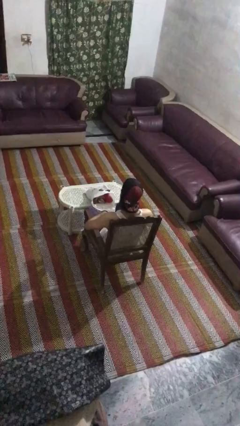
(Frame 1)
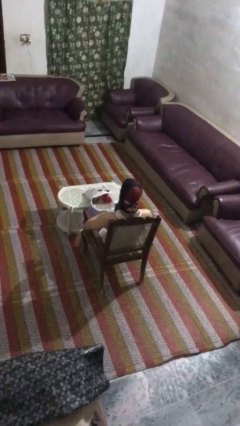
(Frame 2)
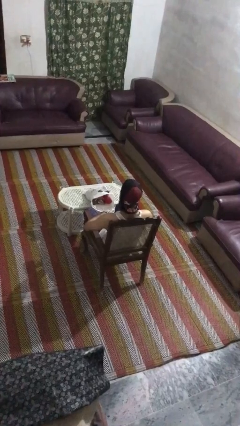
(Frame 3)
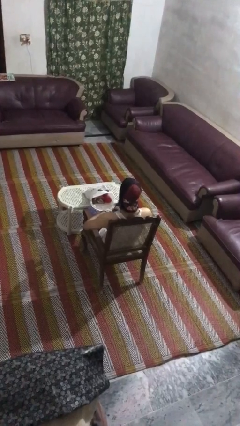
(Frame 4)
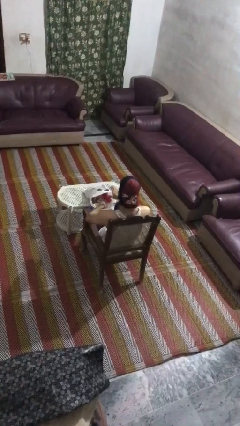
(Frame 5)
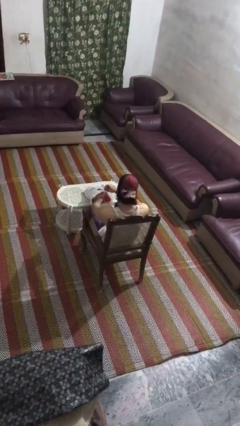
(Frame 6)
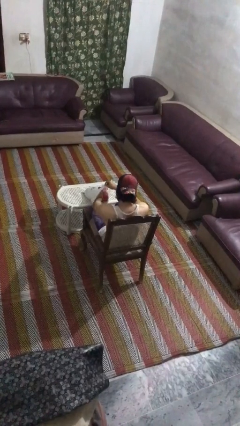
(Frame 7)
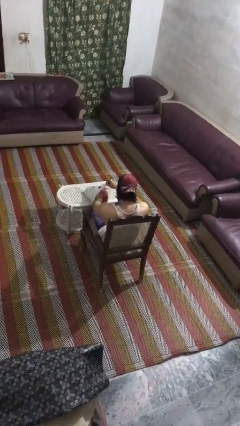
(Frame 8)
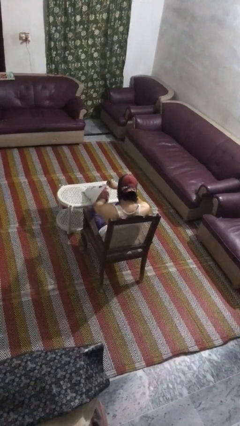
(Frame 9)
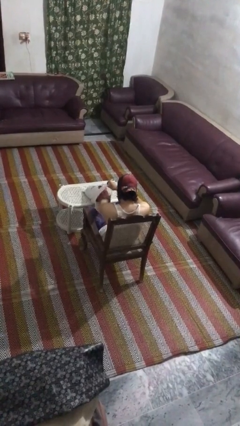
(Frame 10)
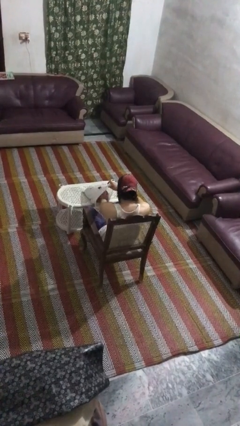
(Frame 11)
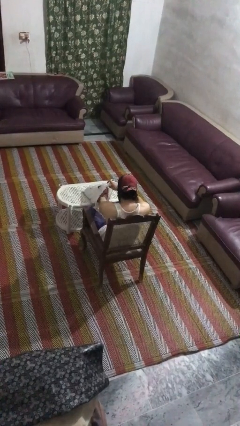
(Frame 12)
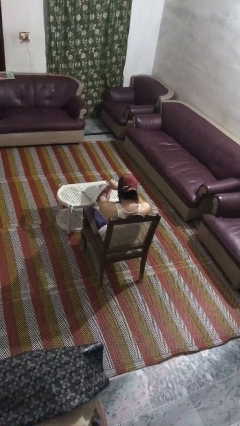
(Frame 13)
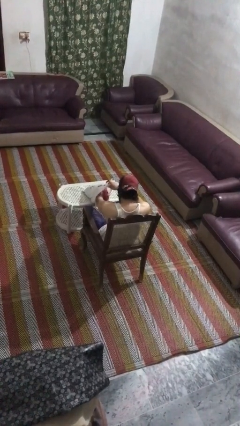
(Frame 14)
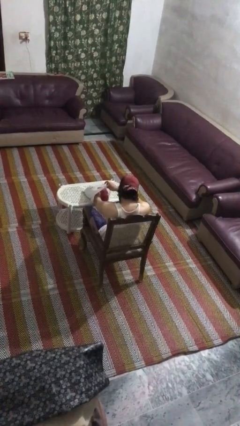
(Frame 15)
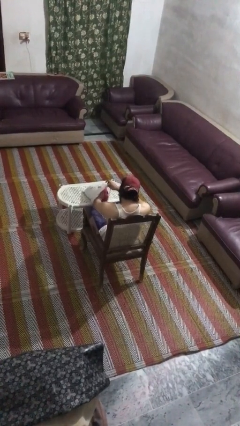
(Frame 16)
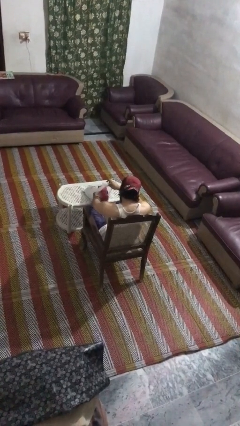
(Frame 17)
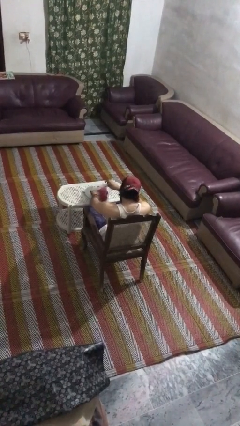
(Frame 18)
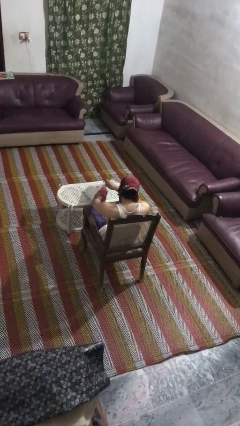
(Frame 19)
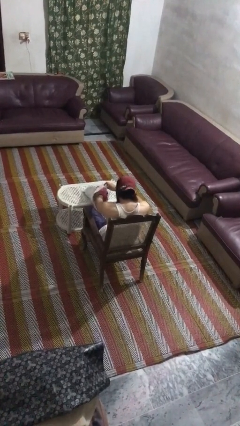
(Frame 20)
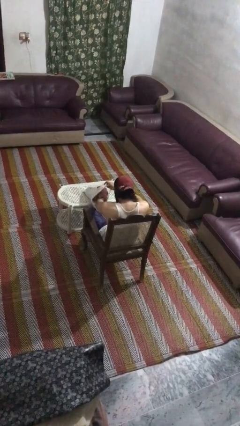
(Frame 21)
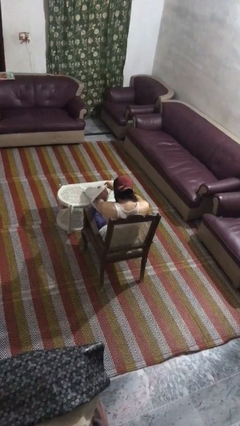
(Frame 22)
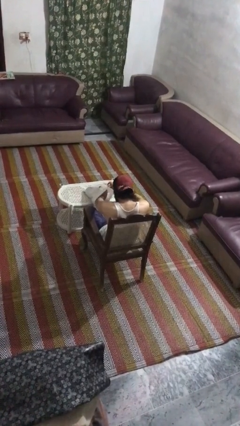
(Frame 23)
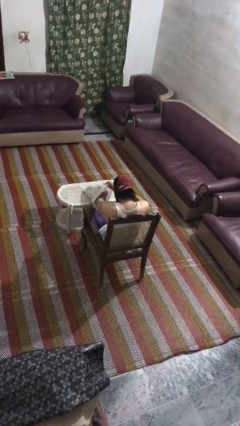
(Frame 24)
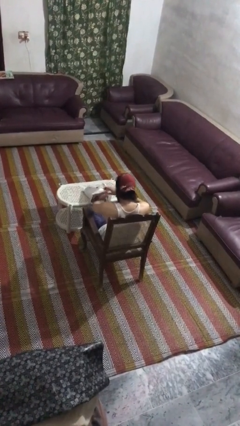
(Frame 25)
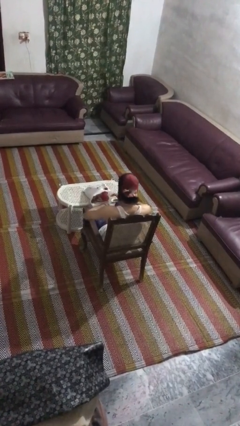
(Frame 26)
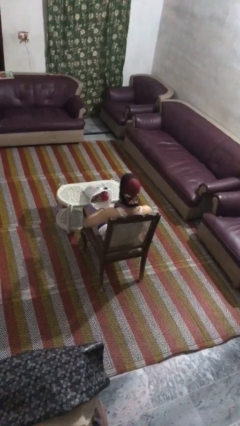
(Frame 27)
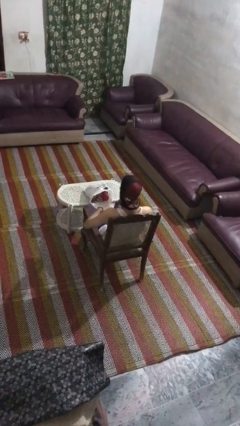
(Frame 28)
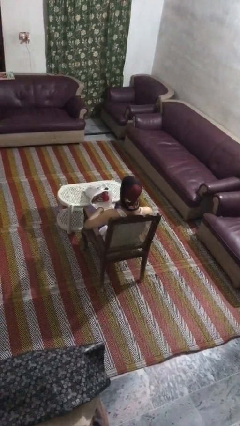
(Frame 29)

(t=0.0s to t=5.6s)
person searches in bag

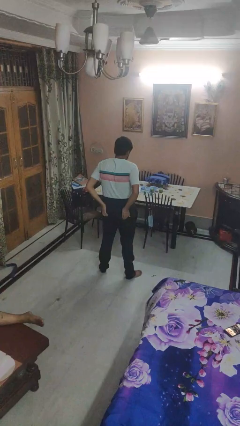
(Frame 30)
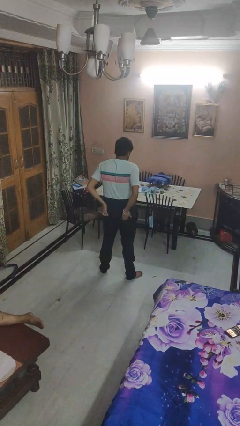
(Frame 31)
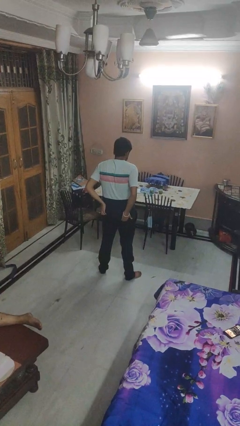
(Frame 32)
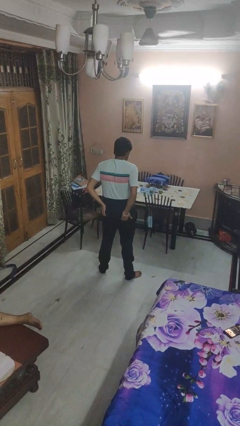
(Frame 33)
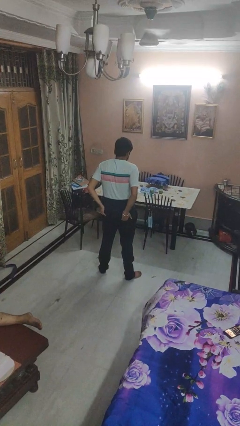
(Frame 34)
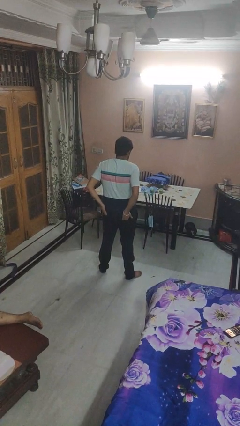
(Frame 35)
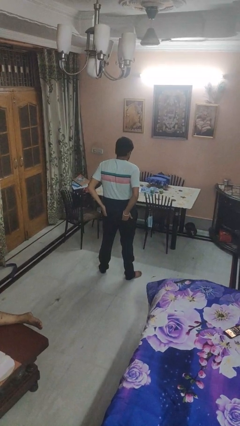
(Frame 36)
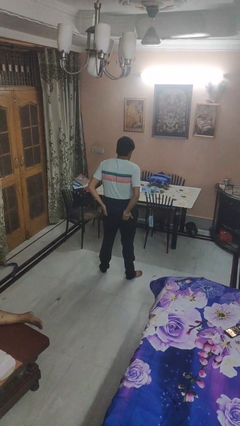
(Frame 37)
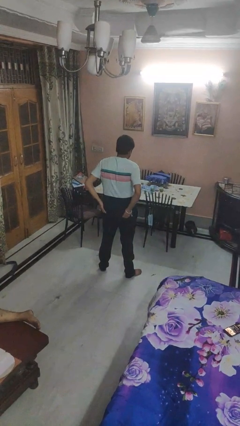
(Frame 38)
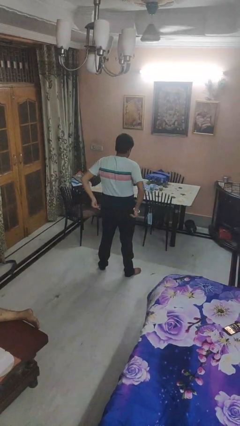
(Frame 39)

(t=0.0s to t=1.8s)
person puts hands in back pockets

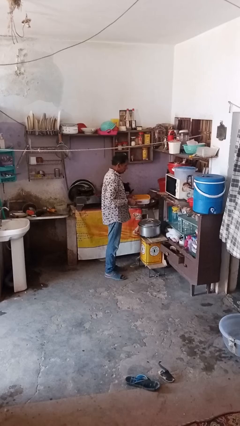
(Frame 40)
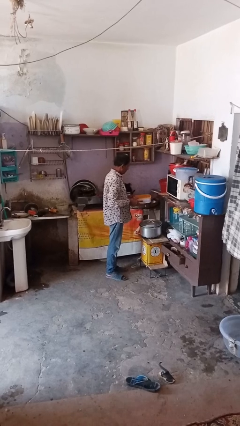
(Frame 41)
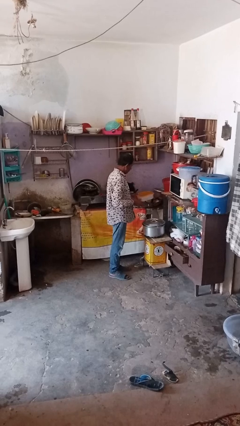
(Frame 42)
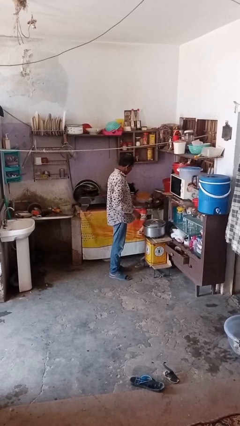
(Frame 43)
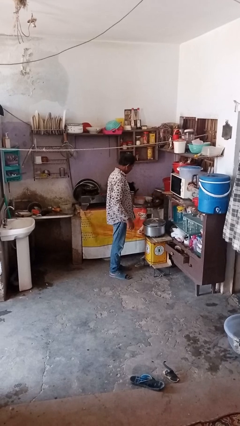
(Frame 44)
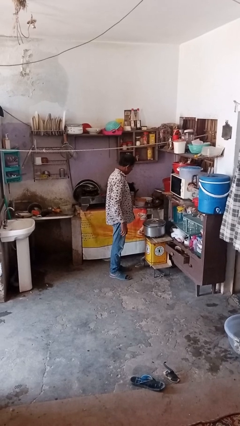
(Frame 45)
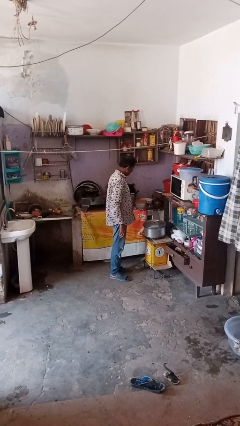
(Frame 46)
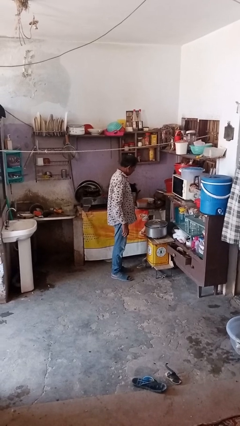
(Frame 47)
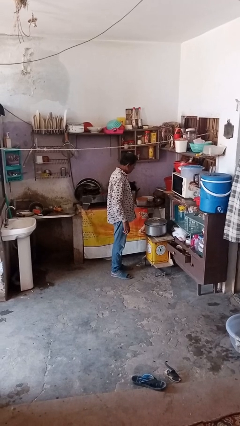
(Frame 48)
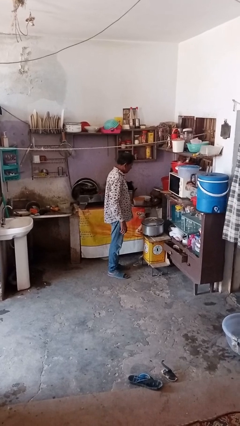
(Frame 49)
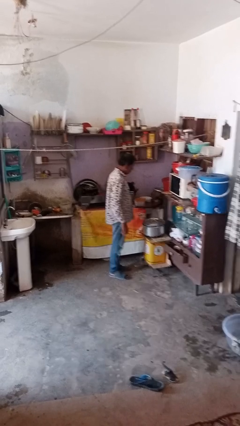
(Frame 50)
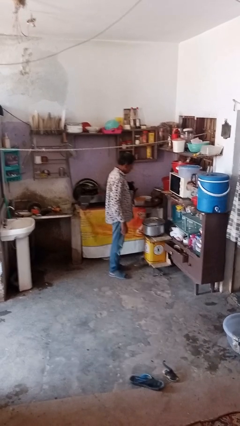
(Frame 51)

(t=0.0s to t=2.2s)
person puts down object on shelf

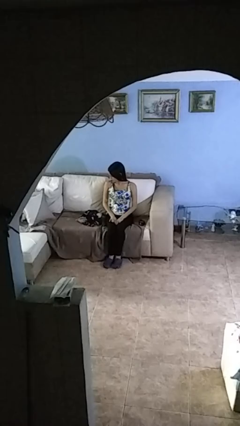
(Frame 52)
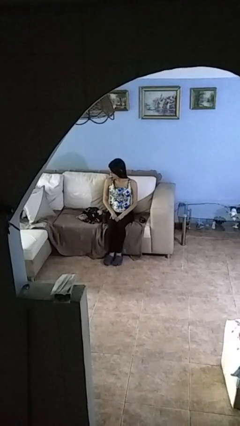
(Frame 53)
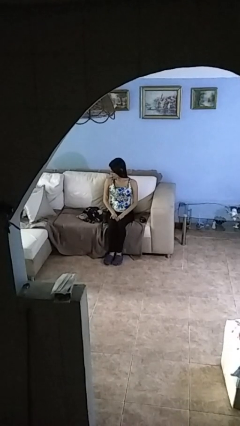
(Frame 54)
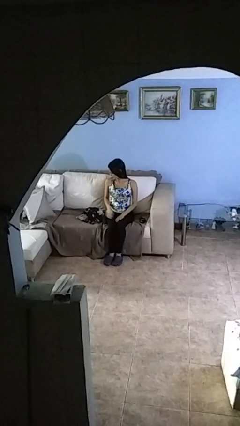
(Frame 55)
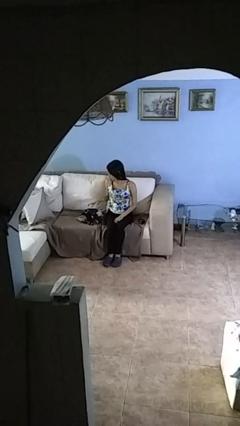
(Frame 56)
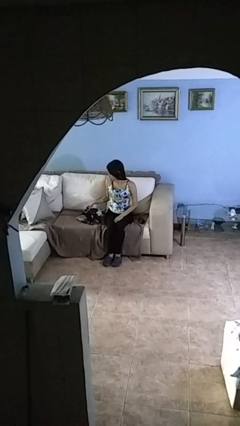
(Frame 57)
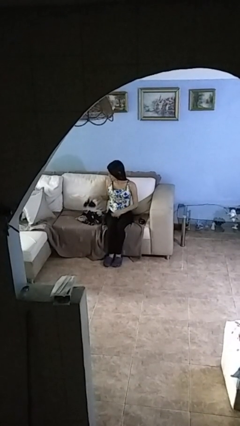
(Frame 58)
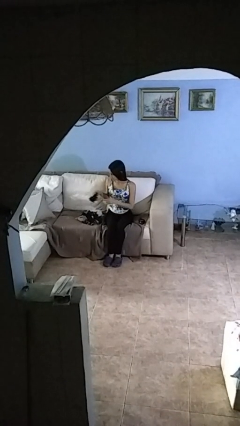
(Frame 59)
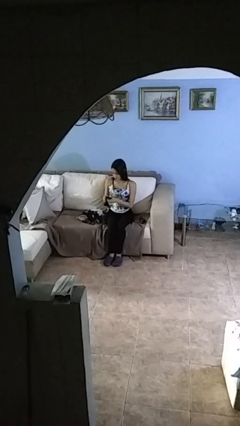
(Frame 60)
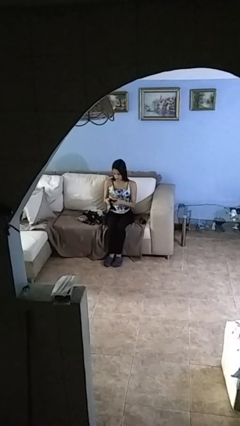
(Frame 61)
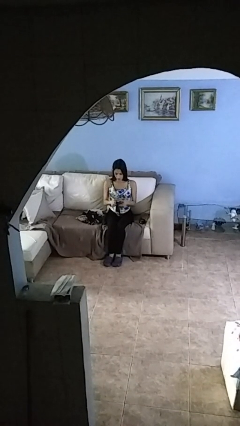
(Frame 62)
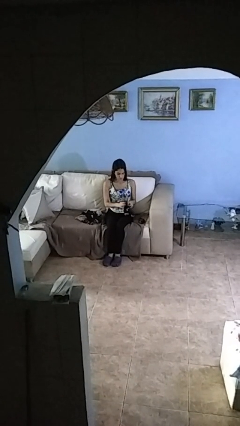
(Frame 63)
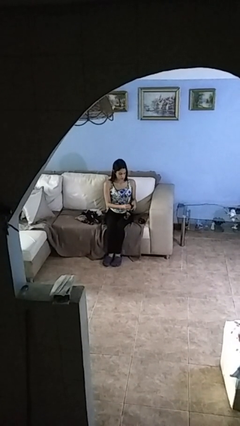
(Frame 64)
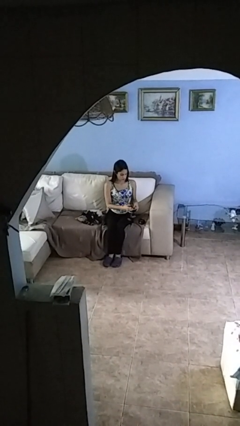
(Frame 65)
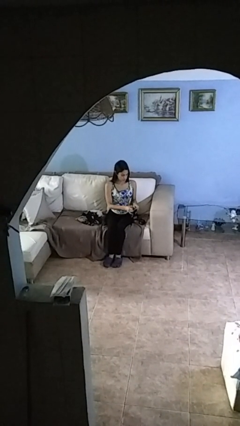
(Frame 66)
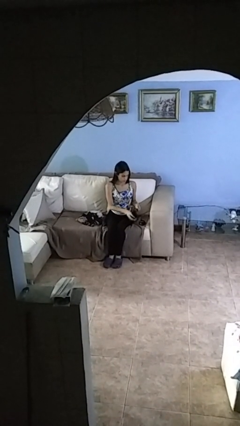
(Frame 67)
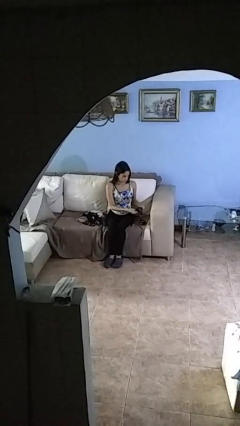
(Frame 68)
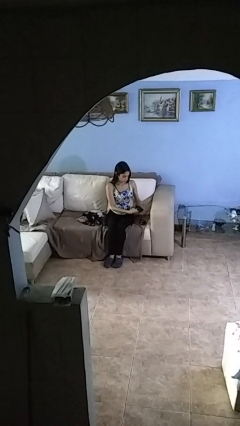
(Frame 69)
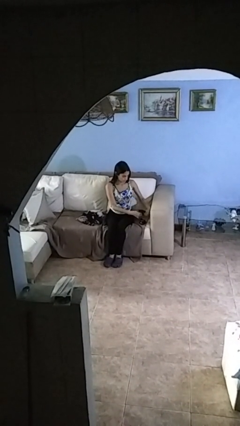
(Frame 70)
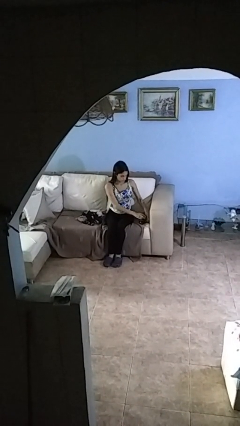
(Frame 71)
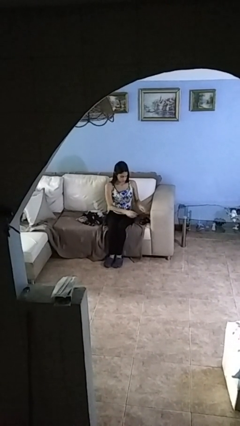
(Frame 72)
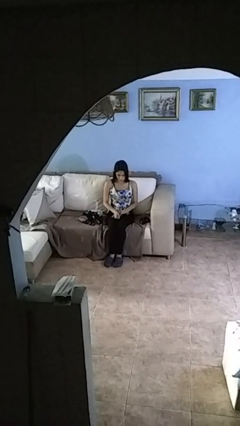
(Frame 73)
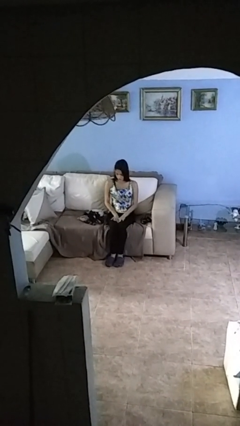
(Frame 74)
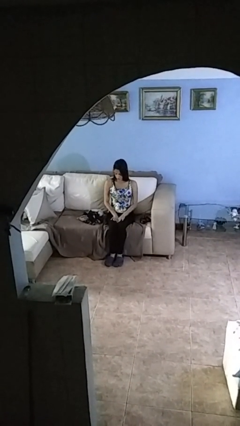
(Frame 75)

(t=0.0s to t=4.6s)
person folds socks

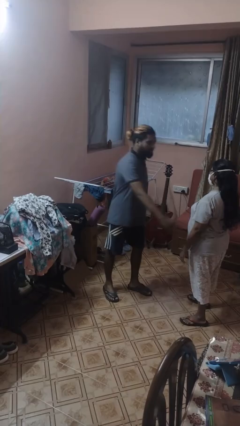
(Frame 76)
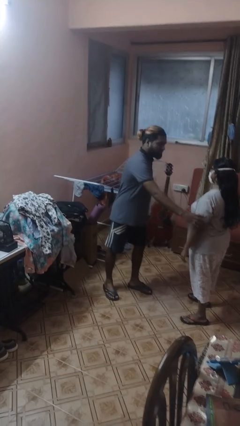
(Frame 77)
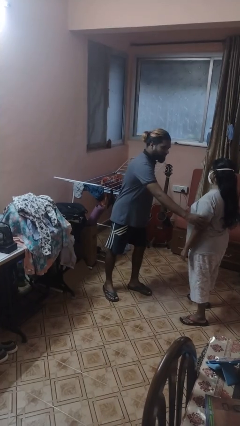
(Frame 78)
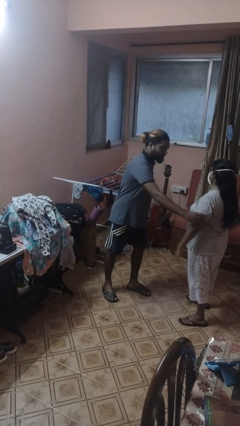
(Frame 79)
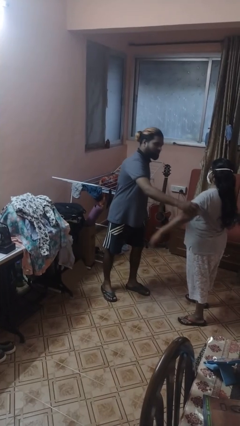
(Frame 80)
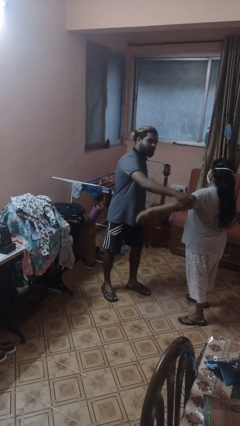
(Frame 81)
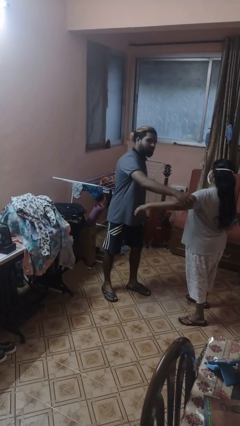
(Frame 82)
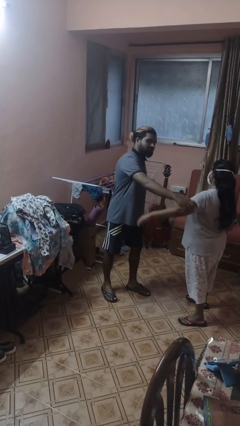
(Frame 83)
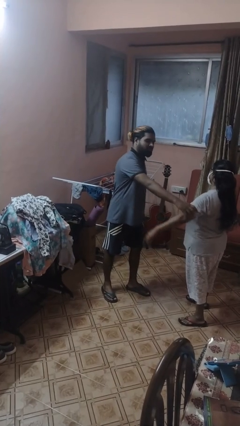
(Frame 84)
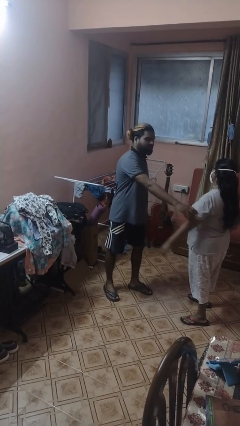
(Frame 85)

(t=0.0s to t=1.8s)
person grabs person by bicep

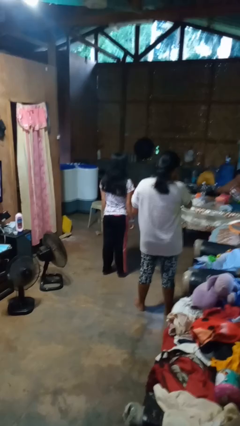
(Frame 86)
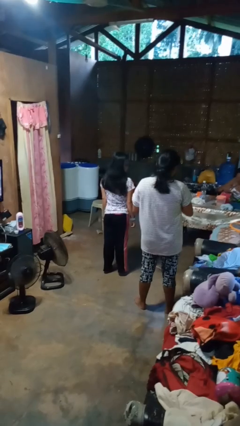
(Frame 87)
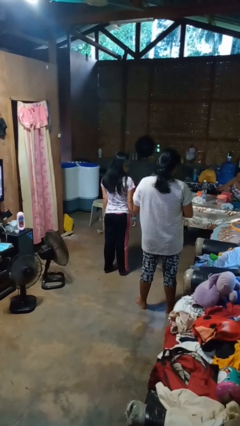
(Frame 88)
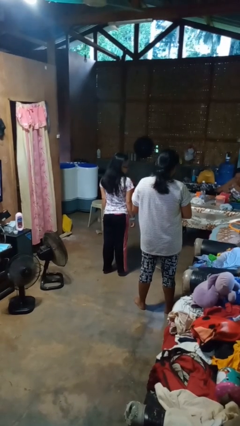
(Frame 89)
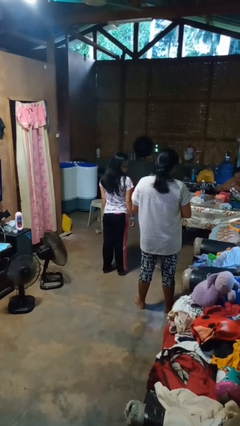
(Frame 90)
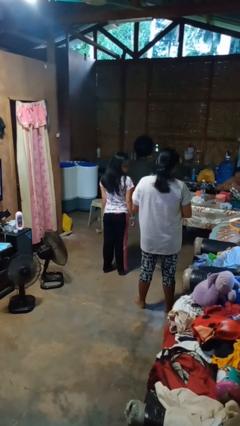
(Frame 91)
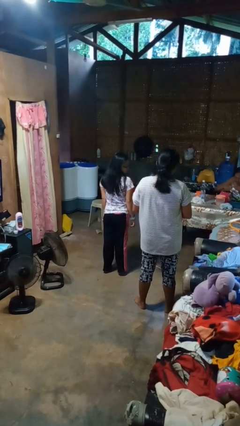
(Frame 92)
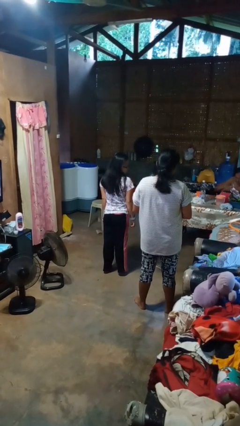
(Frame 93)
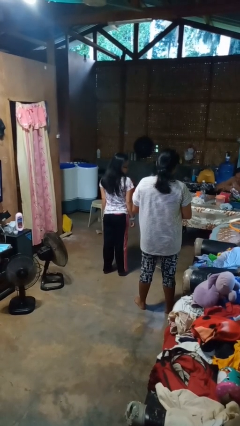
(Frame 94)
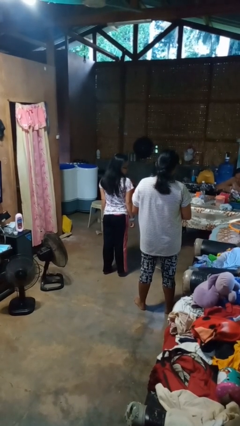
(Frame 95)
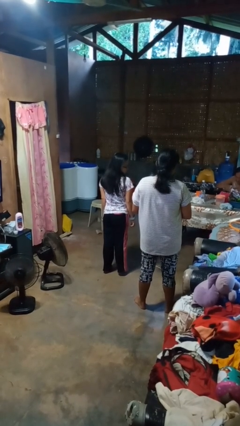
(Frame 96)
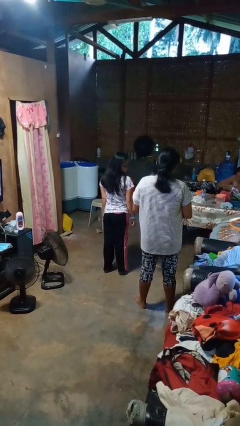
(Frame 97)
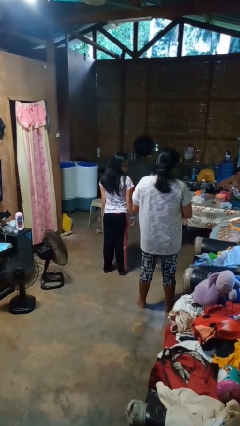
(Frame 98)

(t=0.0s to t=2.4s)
person looks over shoulder
